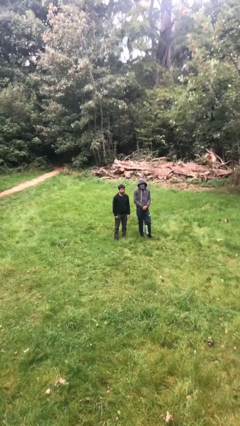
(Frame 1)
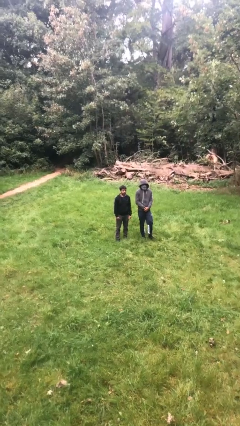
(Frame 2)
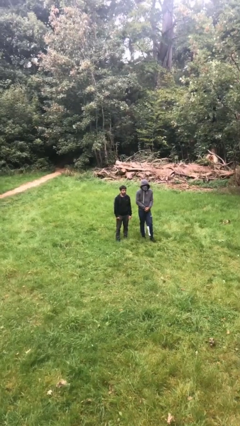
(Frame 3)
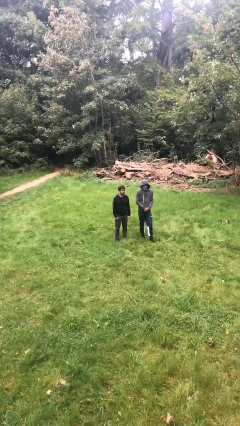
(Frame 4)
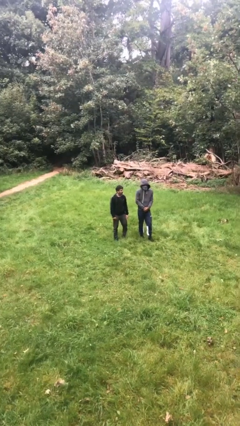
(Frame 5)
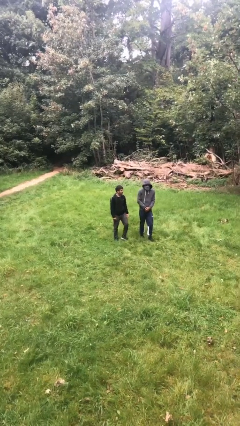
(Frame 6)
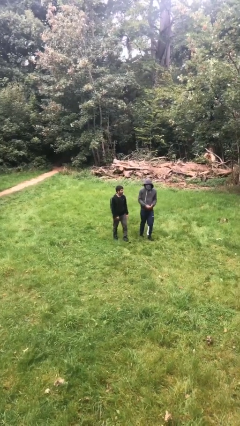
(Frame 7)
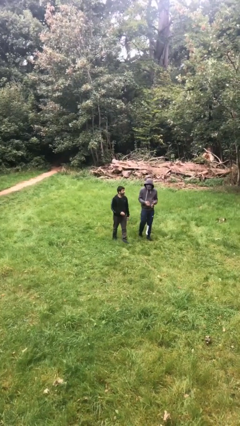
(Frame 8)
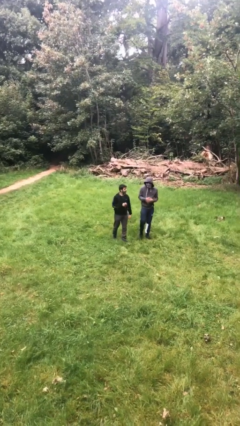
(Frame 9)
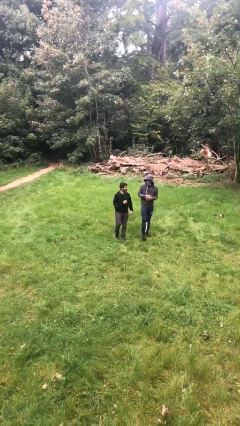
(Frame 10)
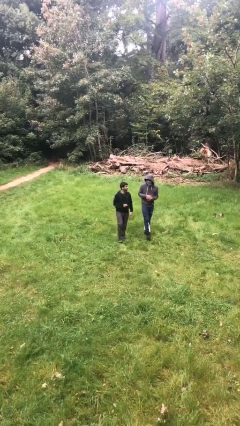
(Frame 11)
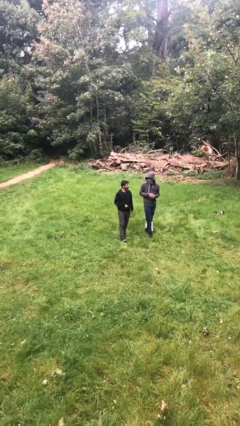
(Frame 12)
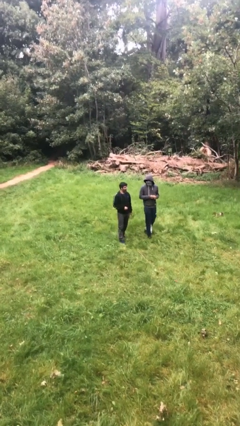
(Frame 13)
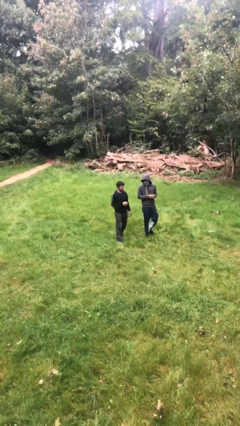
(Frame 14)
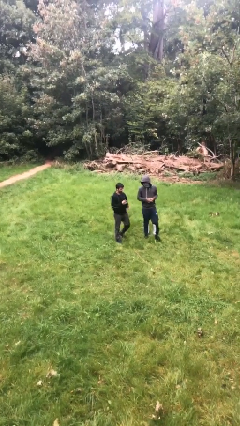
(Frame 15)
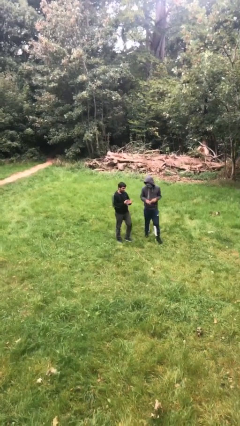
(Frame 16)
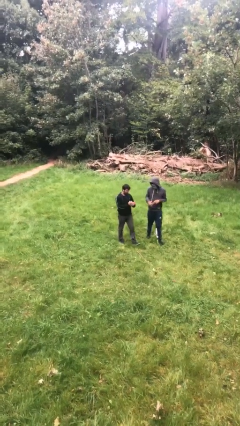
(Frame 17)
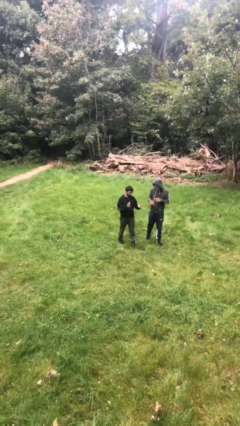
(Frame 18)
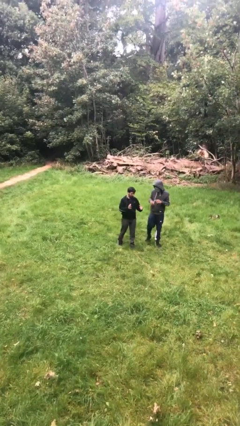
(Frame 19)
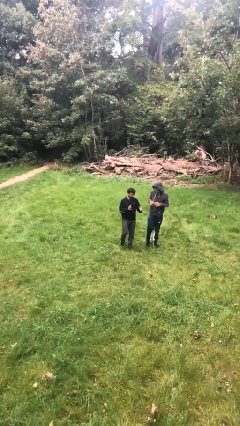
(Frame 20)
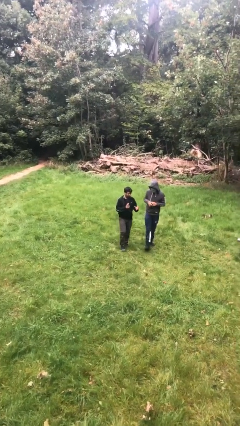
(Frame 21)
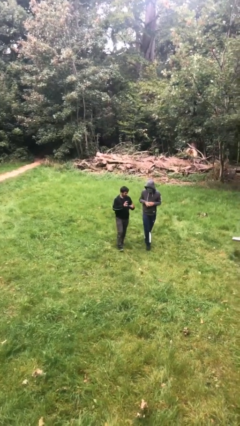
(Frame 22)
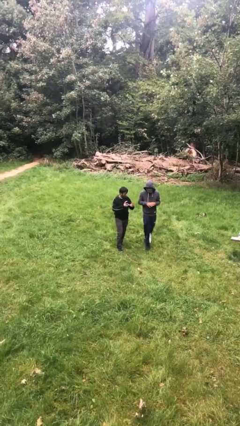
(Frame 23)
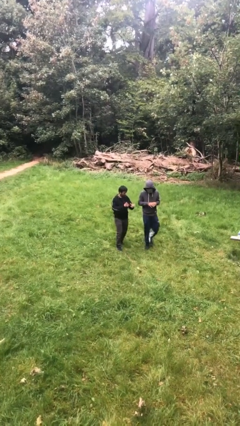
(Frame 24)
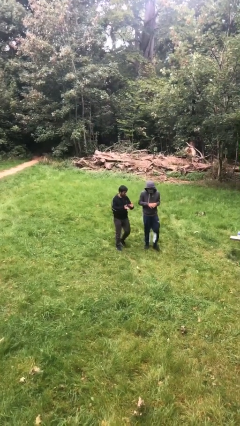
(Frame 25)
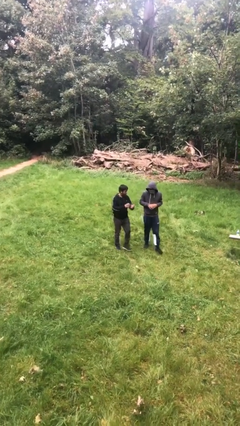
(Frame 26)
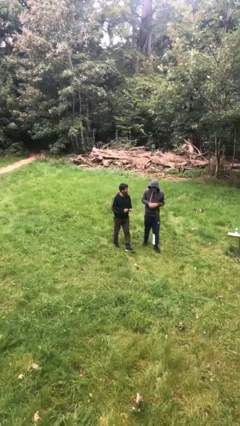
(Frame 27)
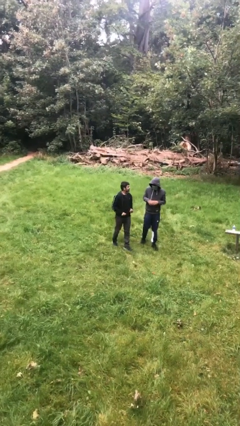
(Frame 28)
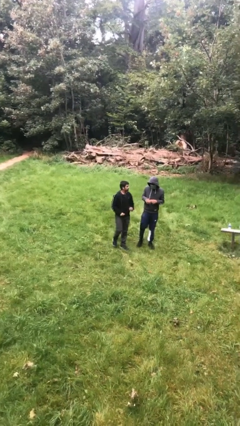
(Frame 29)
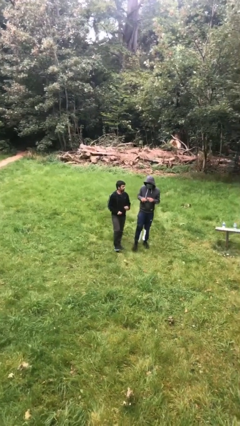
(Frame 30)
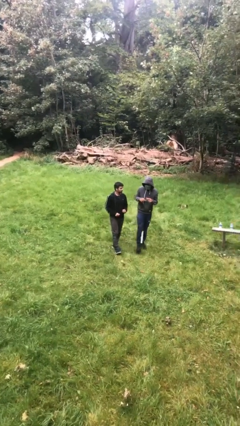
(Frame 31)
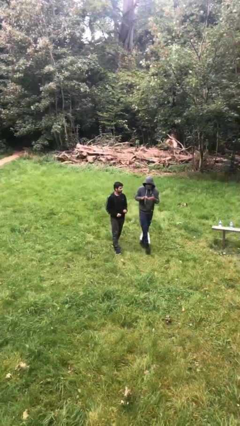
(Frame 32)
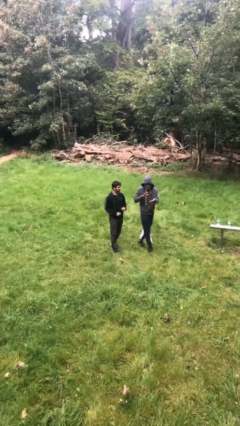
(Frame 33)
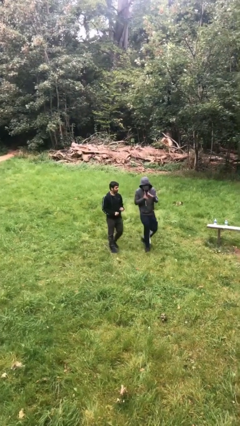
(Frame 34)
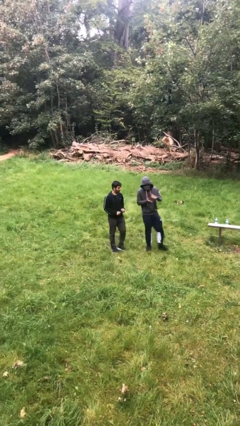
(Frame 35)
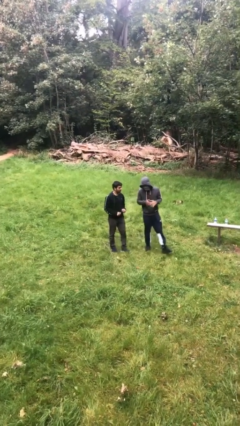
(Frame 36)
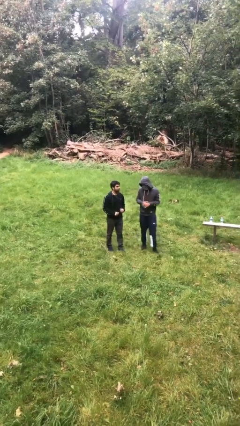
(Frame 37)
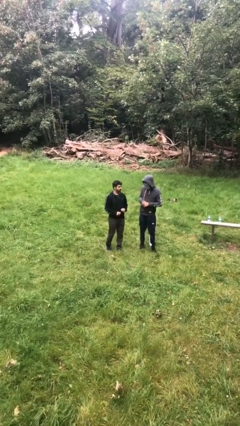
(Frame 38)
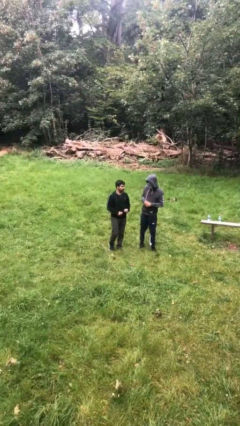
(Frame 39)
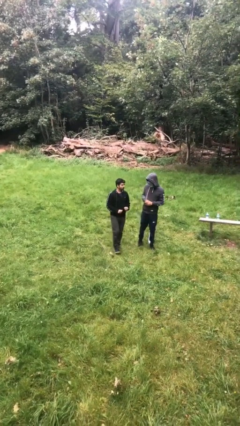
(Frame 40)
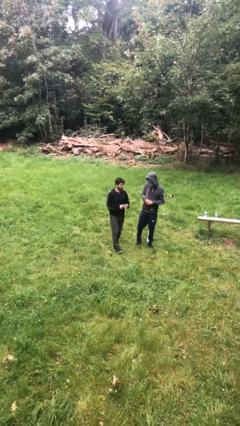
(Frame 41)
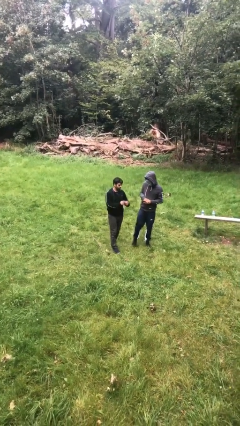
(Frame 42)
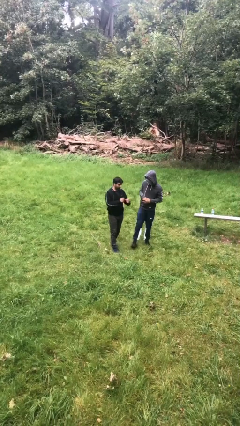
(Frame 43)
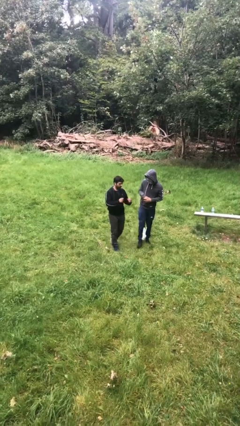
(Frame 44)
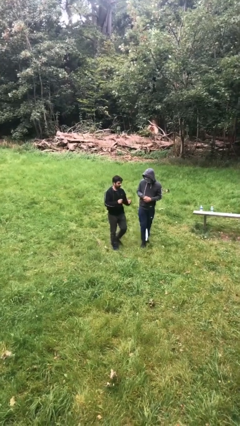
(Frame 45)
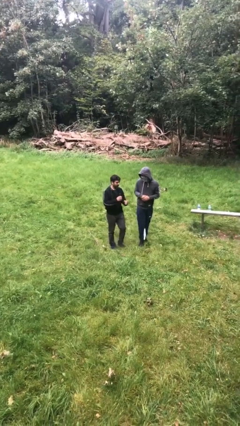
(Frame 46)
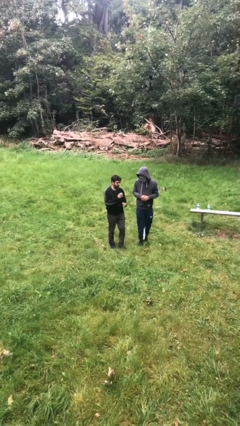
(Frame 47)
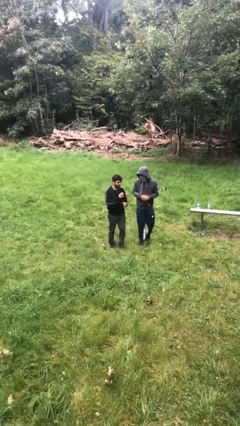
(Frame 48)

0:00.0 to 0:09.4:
person talks to person

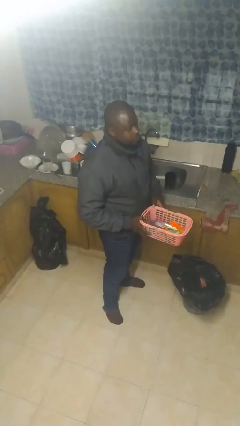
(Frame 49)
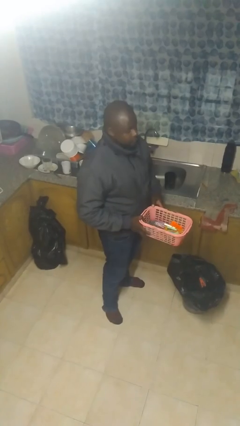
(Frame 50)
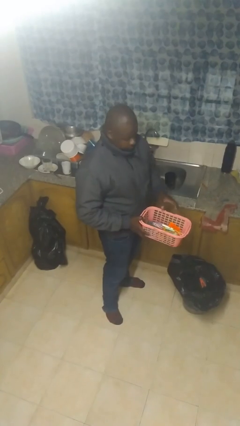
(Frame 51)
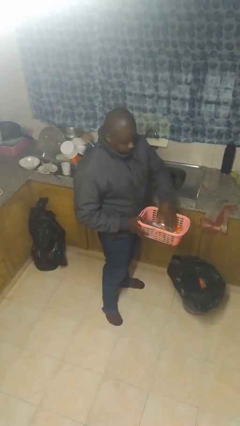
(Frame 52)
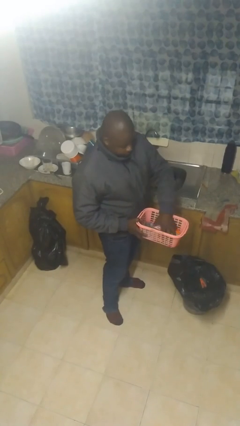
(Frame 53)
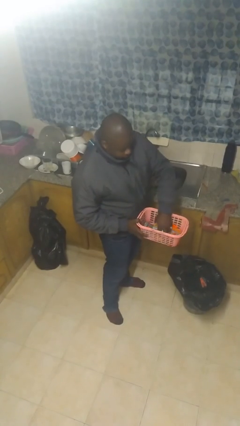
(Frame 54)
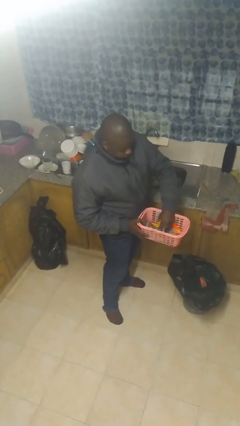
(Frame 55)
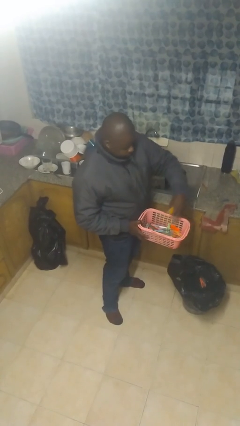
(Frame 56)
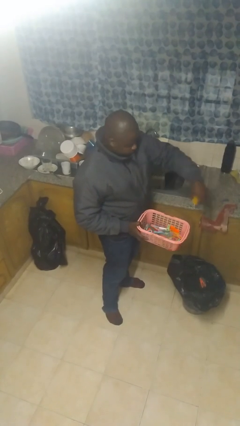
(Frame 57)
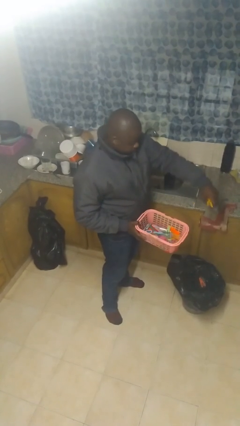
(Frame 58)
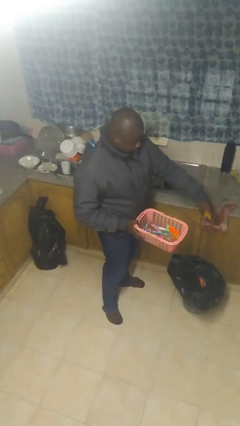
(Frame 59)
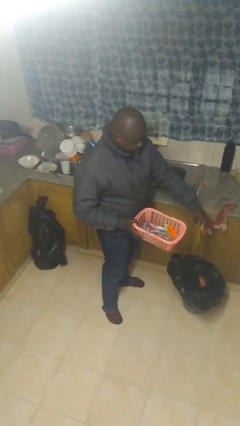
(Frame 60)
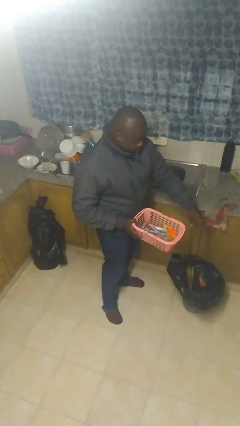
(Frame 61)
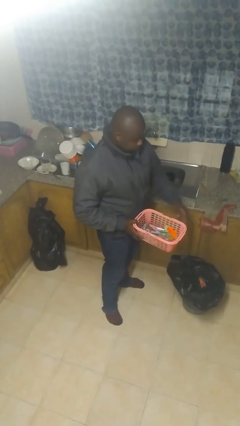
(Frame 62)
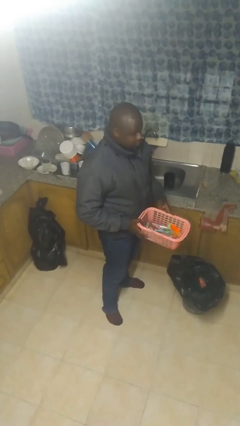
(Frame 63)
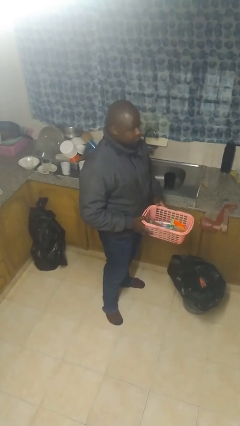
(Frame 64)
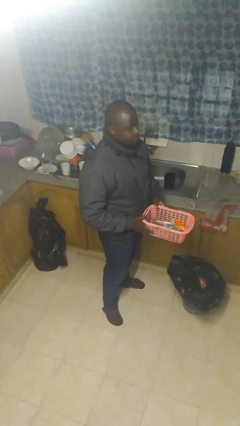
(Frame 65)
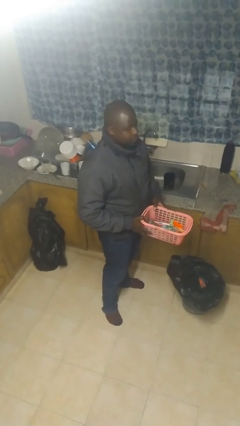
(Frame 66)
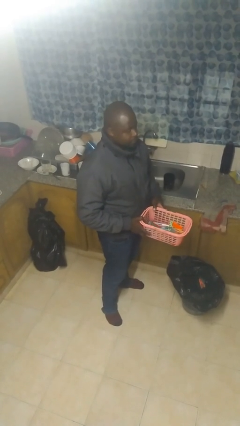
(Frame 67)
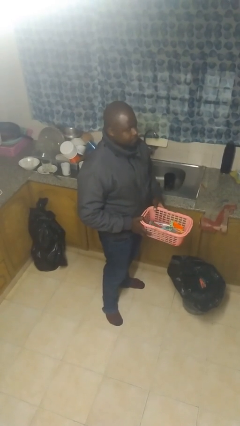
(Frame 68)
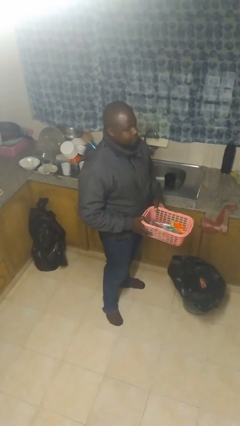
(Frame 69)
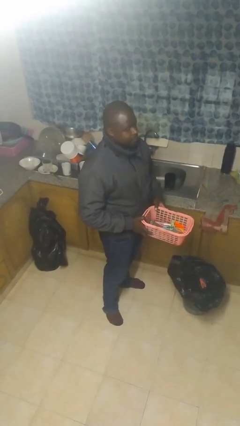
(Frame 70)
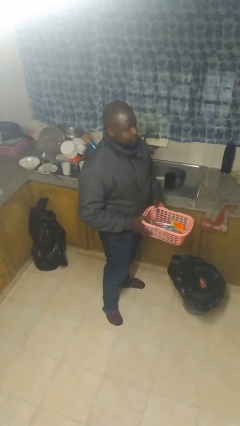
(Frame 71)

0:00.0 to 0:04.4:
person discards trash

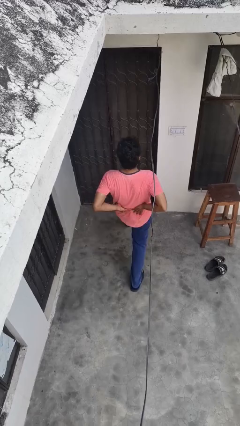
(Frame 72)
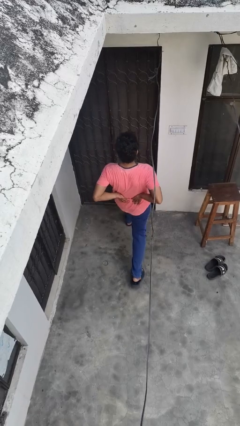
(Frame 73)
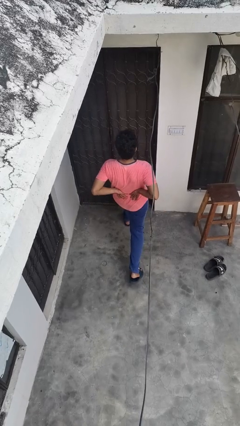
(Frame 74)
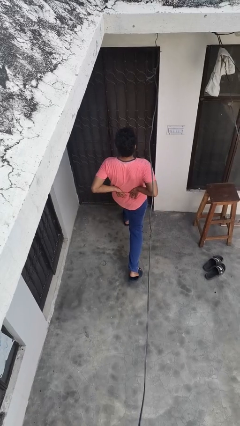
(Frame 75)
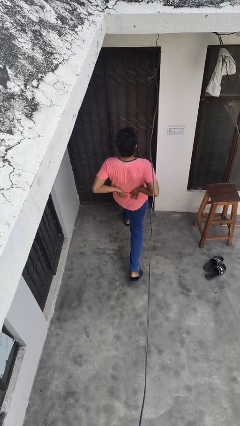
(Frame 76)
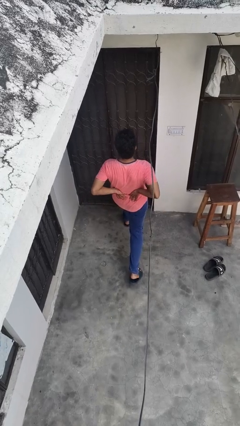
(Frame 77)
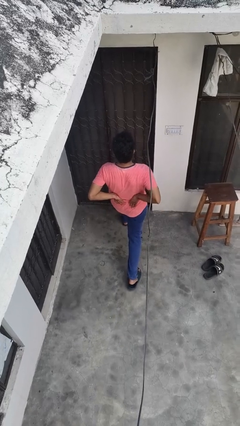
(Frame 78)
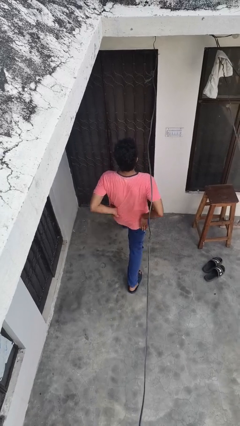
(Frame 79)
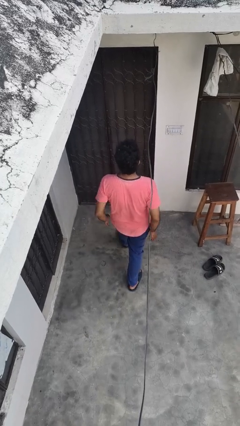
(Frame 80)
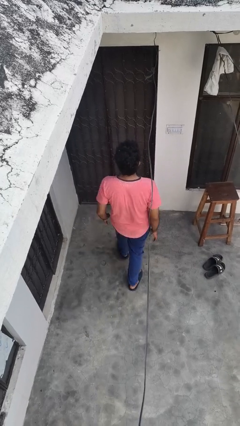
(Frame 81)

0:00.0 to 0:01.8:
person exercises with lunges

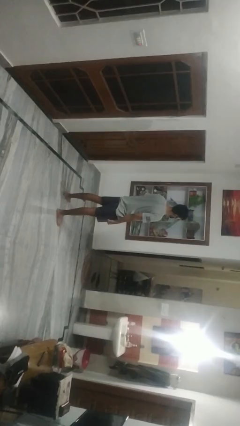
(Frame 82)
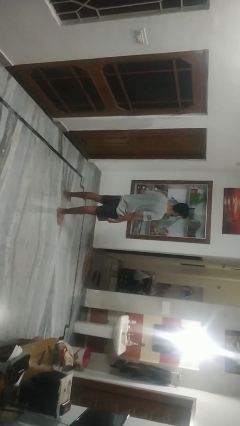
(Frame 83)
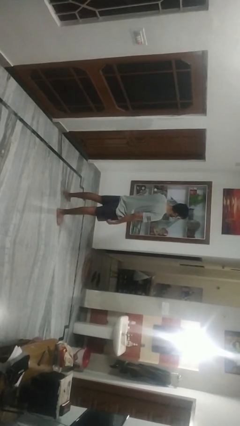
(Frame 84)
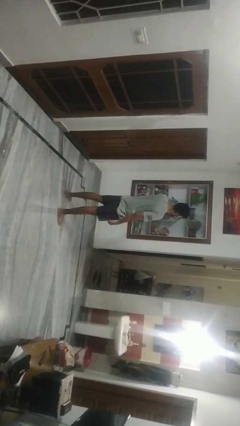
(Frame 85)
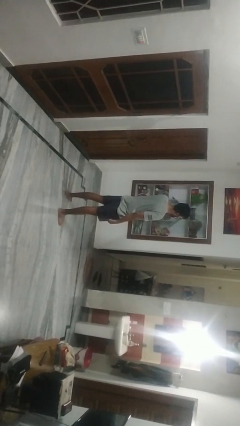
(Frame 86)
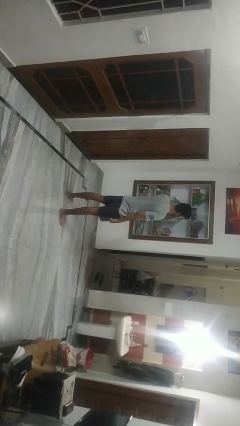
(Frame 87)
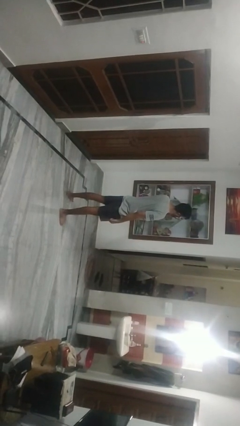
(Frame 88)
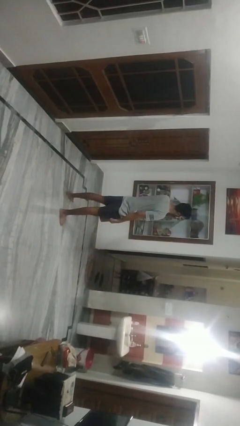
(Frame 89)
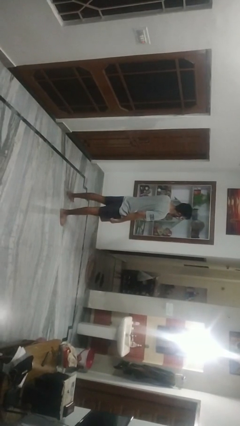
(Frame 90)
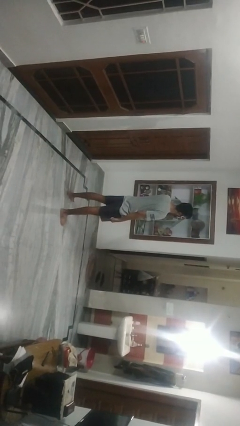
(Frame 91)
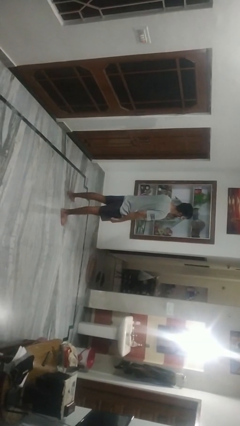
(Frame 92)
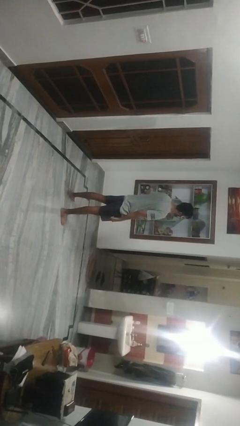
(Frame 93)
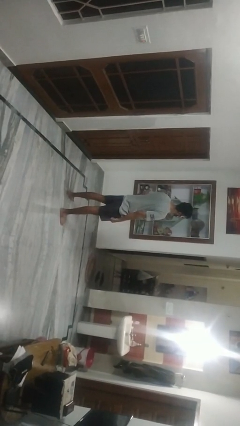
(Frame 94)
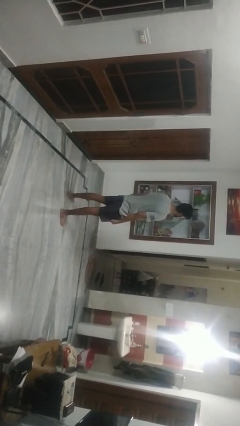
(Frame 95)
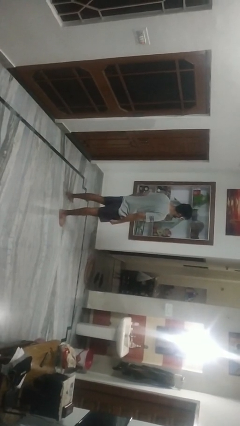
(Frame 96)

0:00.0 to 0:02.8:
person scratches face
